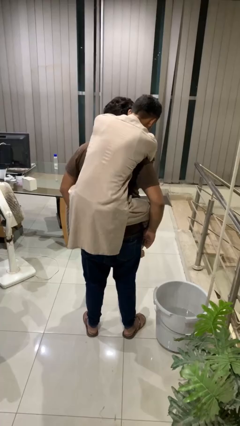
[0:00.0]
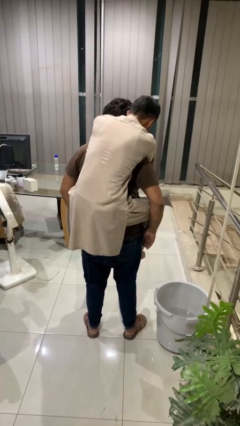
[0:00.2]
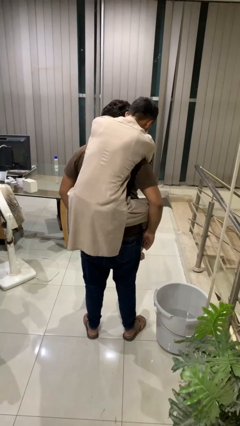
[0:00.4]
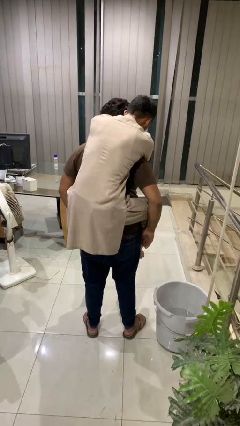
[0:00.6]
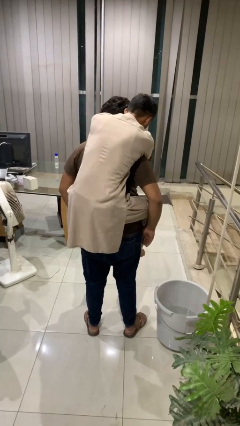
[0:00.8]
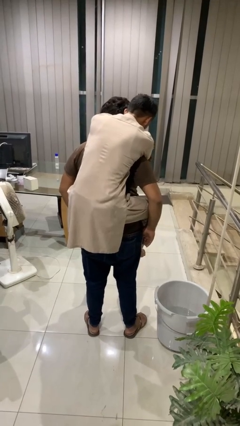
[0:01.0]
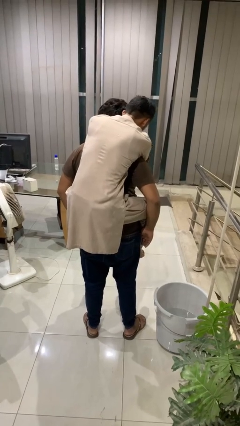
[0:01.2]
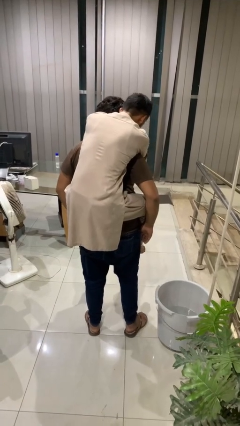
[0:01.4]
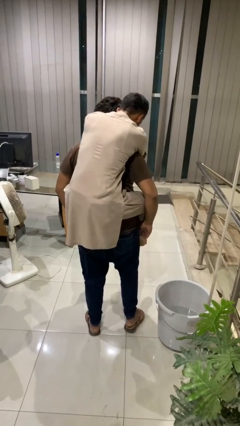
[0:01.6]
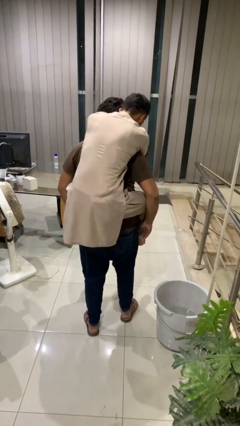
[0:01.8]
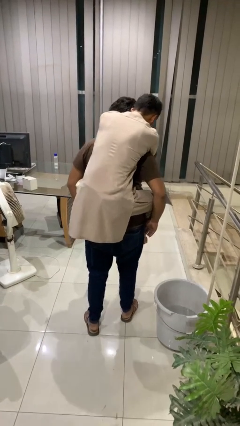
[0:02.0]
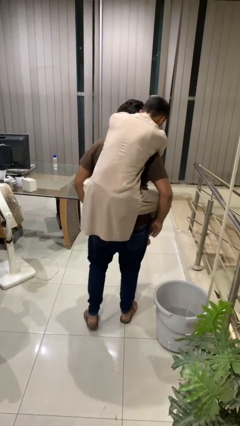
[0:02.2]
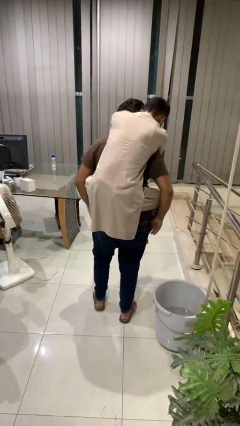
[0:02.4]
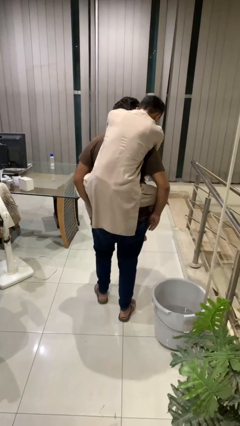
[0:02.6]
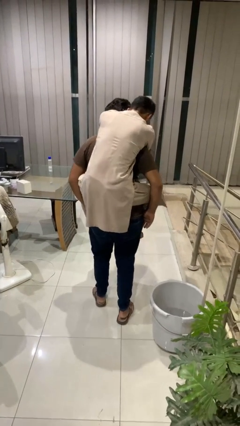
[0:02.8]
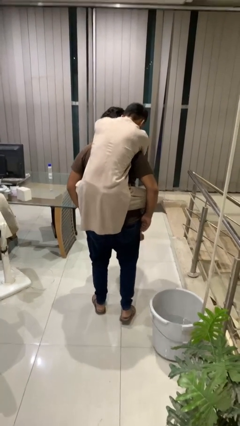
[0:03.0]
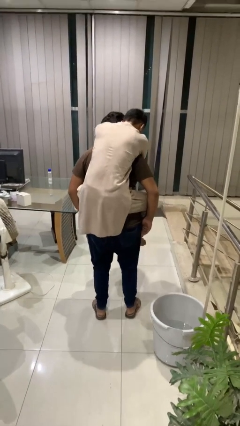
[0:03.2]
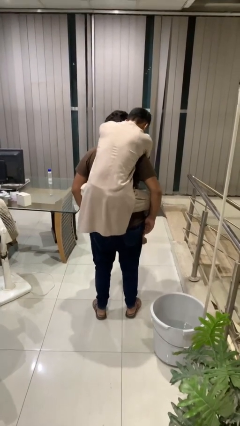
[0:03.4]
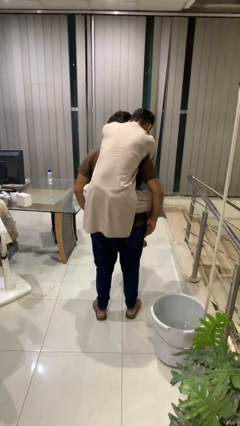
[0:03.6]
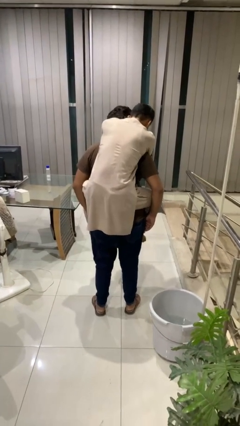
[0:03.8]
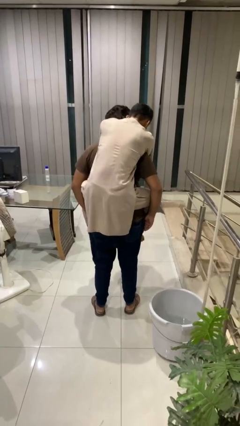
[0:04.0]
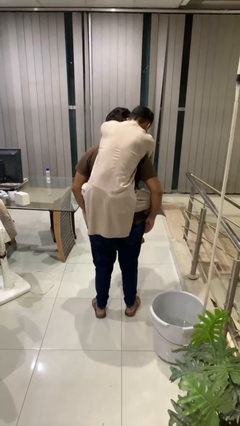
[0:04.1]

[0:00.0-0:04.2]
person carries person on back

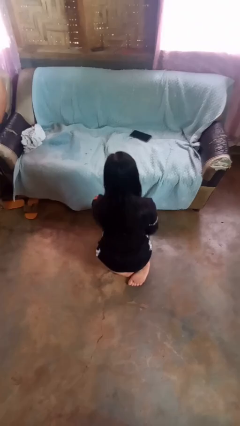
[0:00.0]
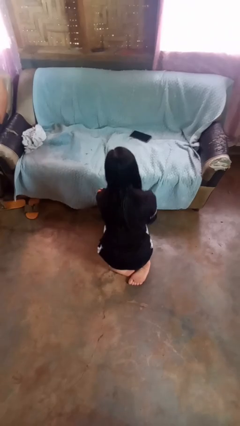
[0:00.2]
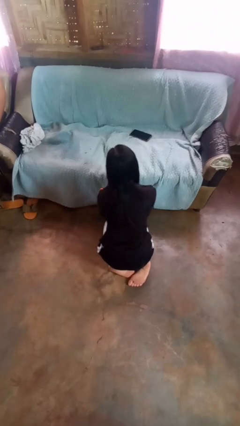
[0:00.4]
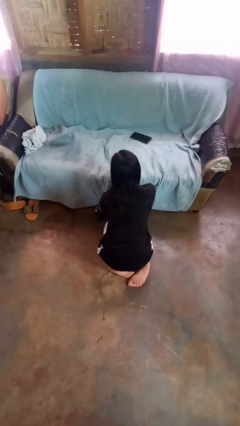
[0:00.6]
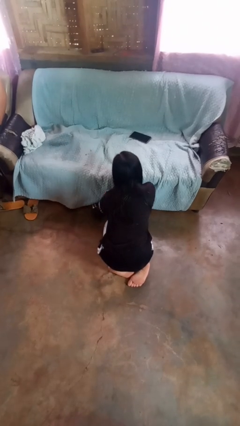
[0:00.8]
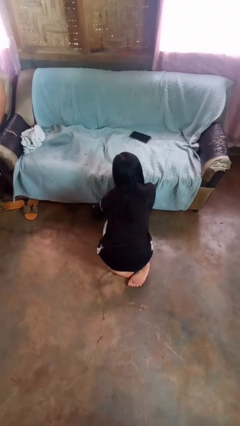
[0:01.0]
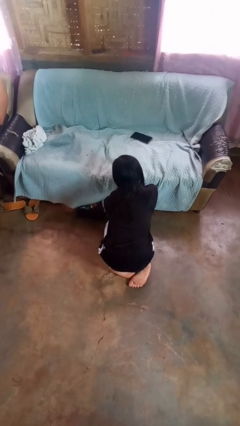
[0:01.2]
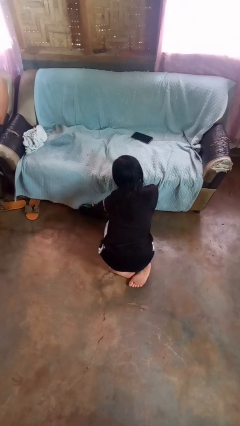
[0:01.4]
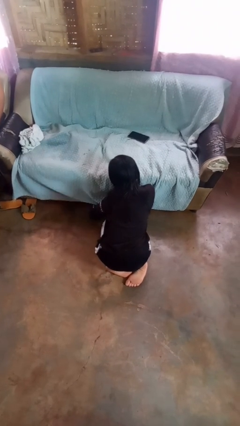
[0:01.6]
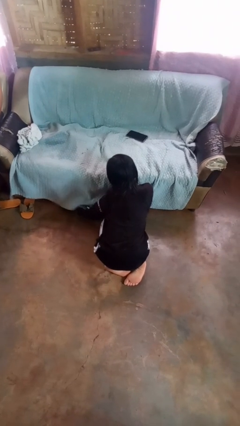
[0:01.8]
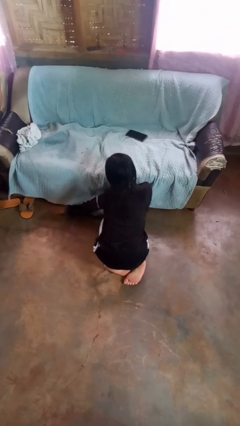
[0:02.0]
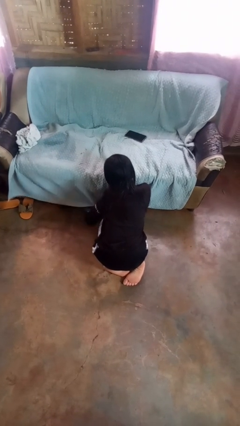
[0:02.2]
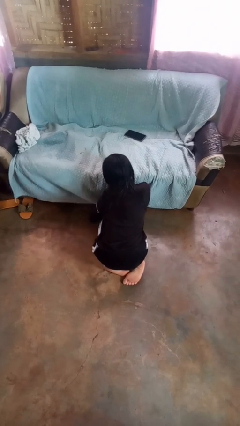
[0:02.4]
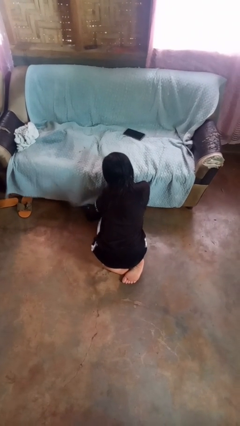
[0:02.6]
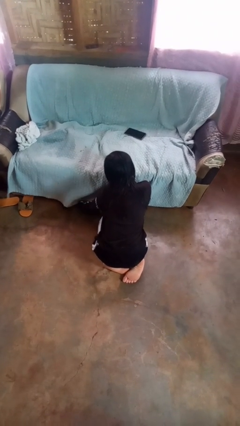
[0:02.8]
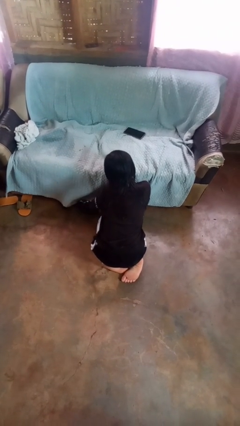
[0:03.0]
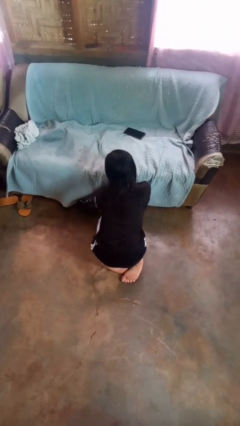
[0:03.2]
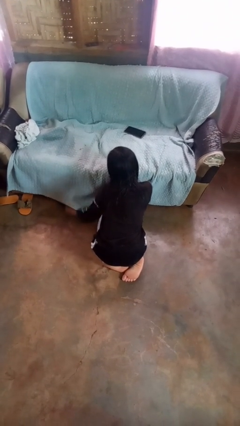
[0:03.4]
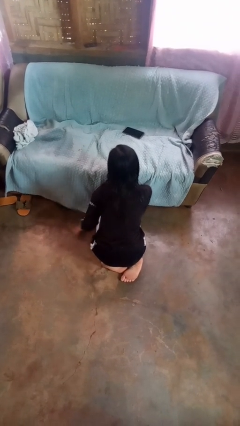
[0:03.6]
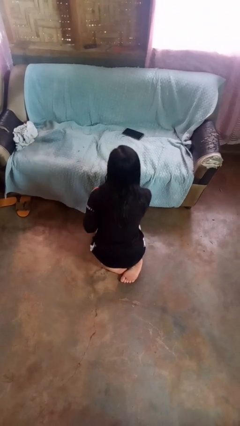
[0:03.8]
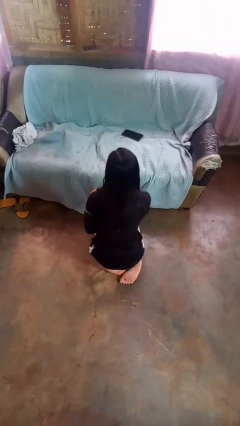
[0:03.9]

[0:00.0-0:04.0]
person searches under couch

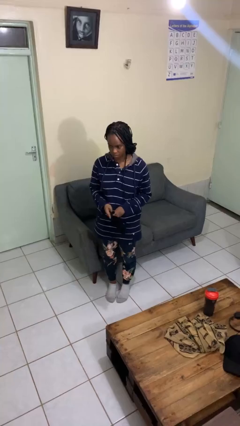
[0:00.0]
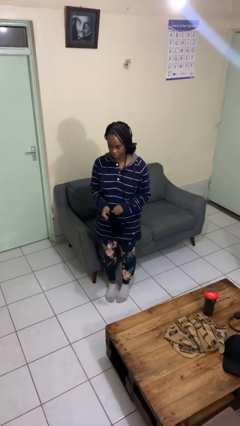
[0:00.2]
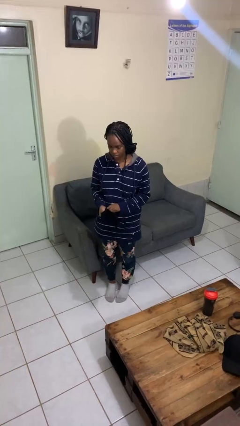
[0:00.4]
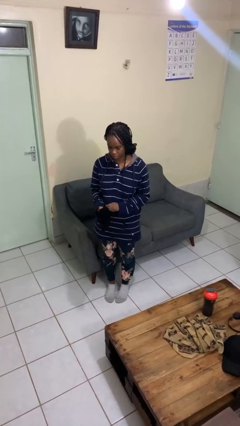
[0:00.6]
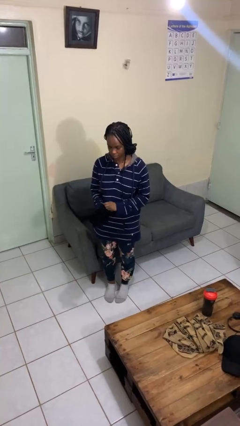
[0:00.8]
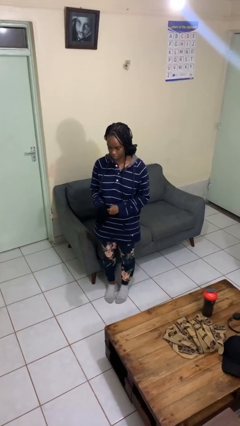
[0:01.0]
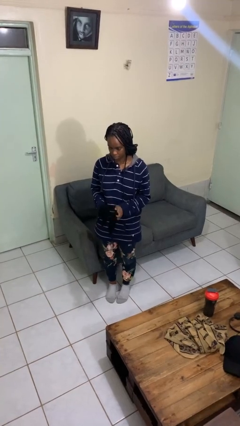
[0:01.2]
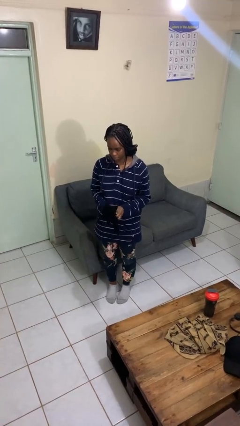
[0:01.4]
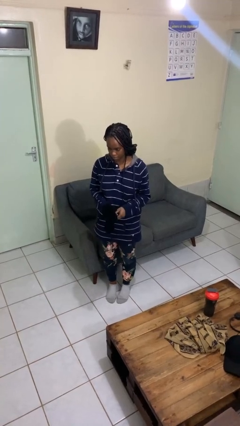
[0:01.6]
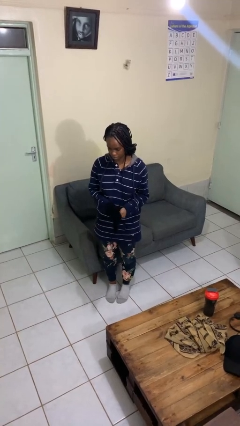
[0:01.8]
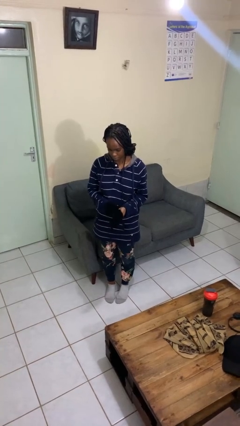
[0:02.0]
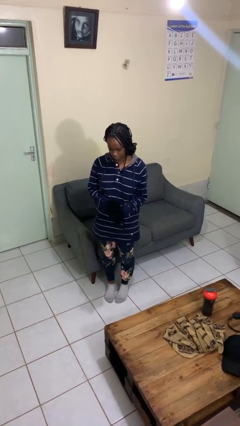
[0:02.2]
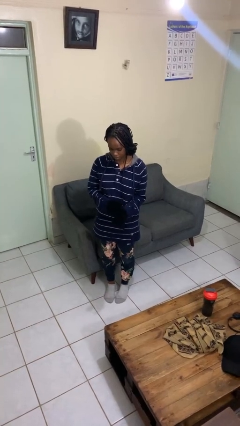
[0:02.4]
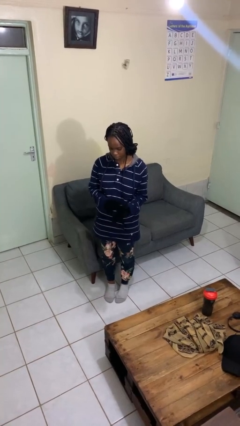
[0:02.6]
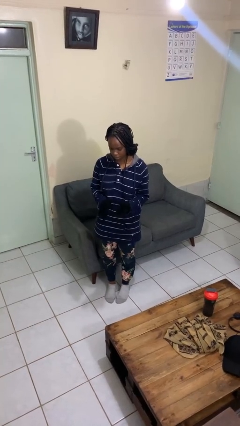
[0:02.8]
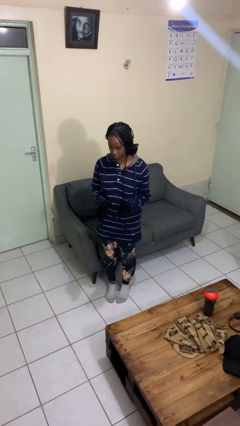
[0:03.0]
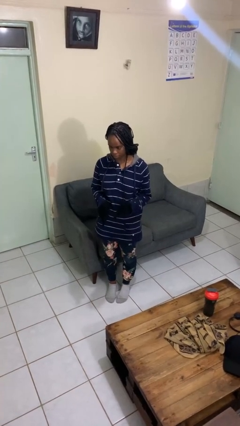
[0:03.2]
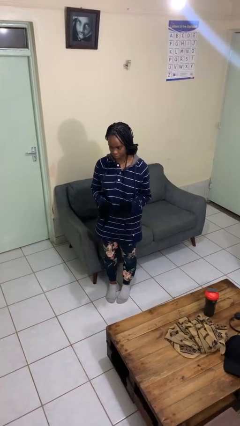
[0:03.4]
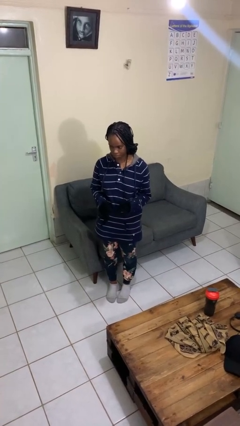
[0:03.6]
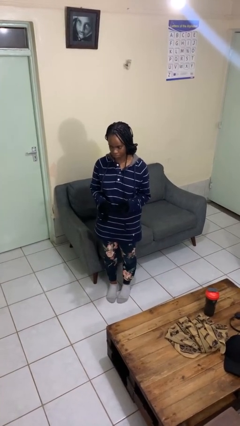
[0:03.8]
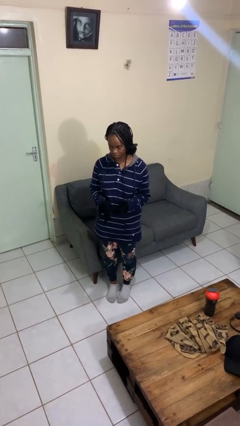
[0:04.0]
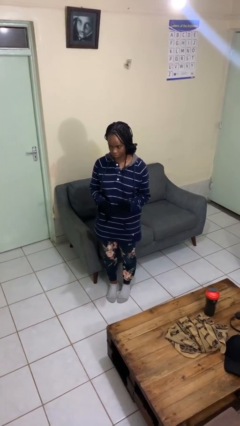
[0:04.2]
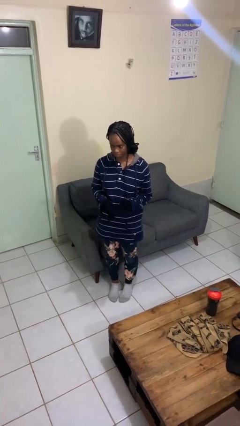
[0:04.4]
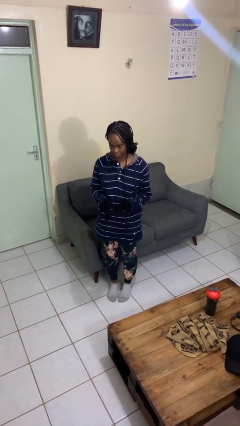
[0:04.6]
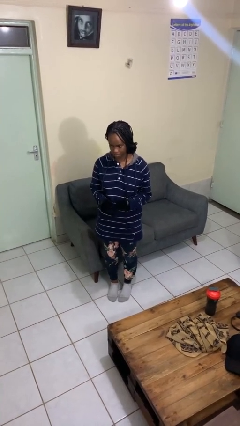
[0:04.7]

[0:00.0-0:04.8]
person puts on gloves

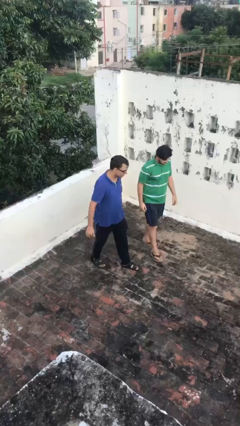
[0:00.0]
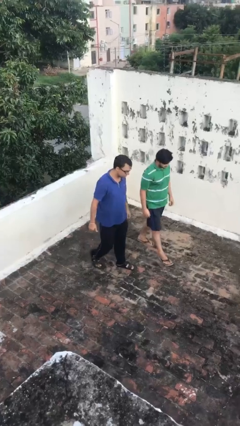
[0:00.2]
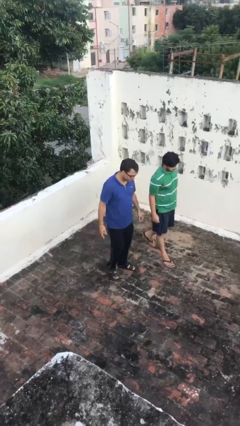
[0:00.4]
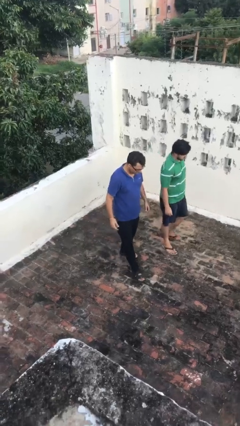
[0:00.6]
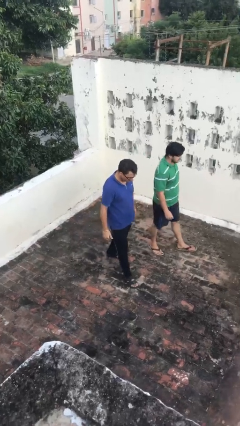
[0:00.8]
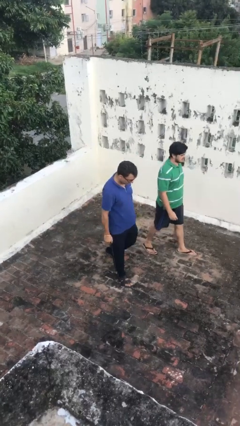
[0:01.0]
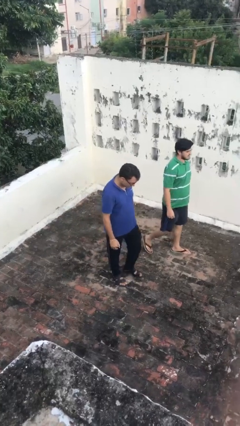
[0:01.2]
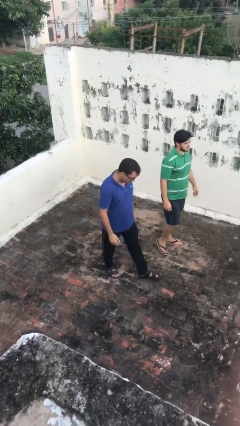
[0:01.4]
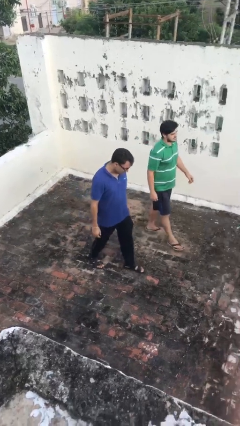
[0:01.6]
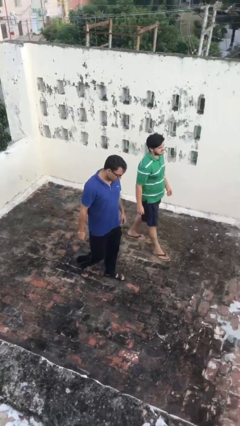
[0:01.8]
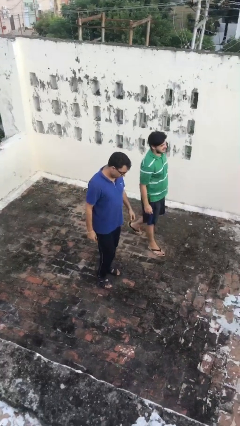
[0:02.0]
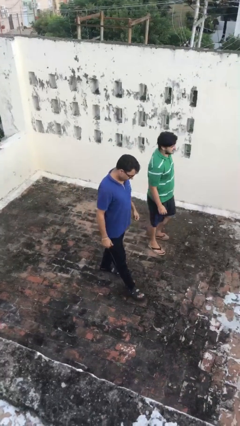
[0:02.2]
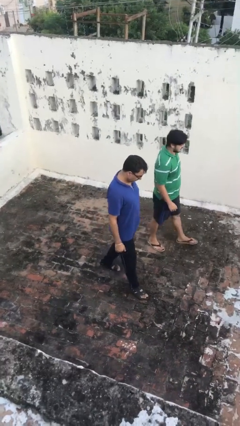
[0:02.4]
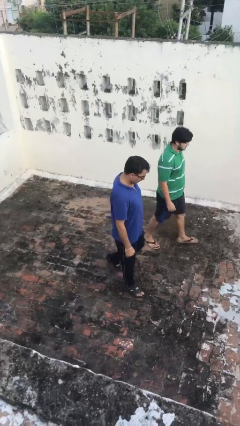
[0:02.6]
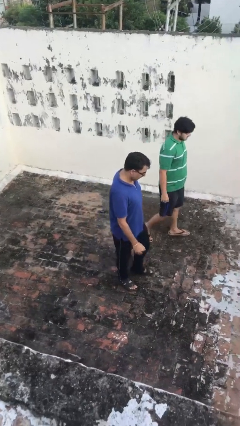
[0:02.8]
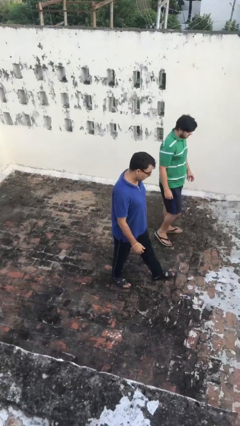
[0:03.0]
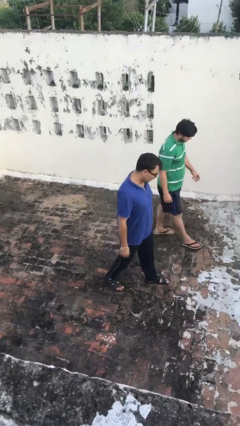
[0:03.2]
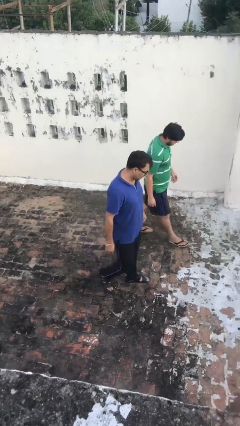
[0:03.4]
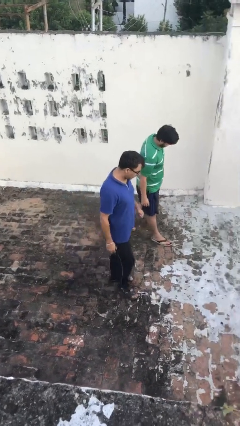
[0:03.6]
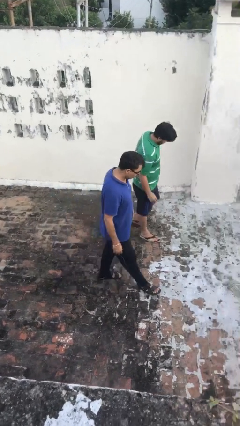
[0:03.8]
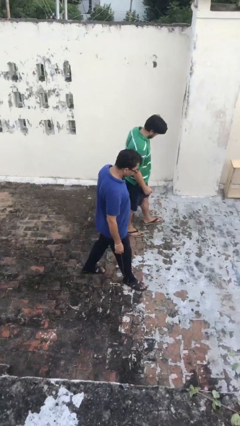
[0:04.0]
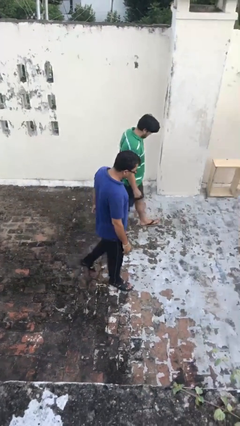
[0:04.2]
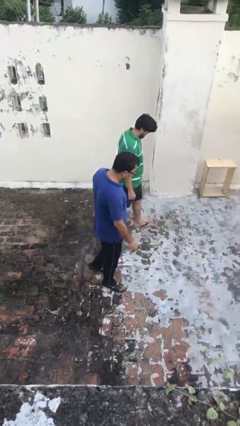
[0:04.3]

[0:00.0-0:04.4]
person talks to person
